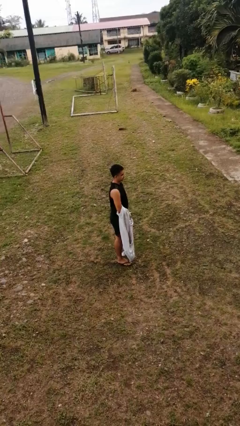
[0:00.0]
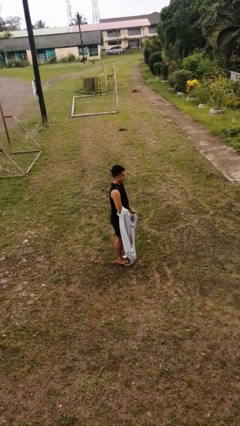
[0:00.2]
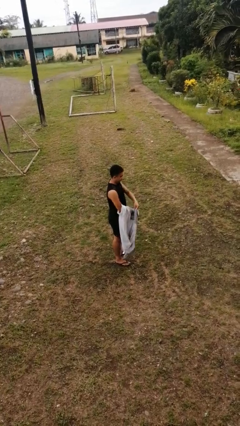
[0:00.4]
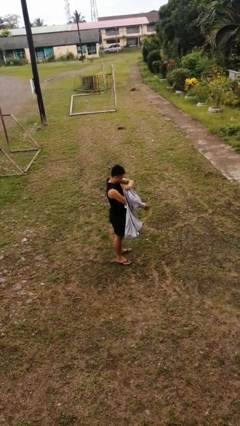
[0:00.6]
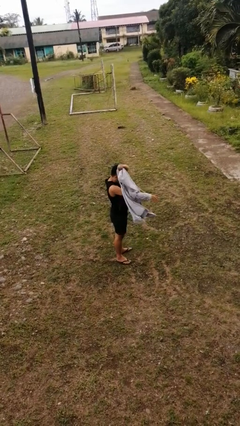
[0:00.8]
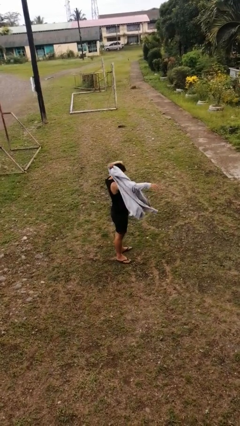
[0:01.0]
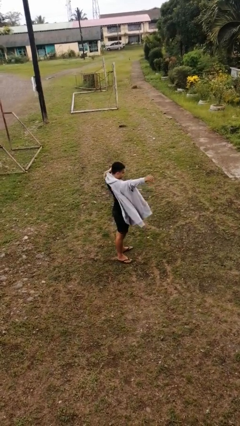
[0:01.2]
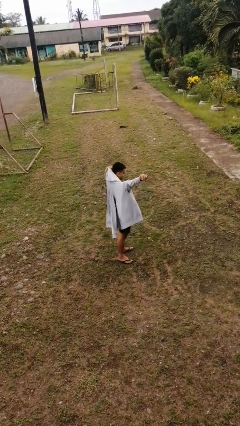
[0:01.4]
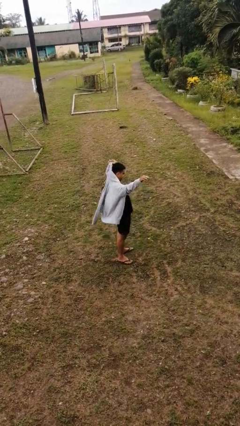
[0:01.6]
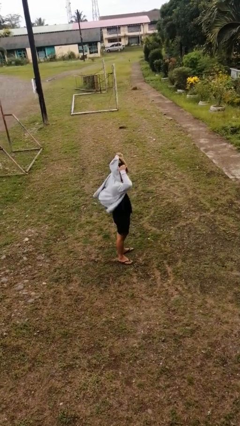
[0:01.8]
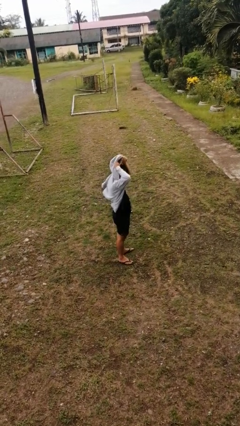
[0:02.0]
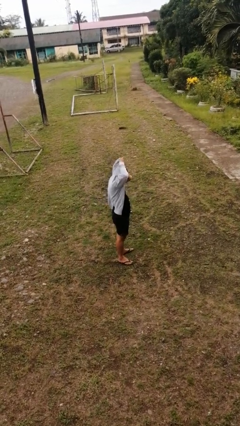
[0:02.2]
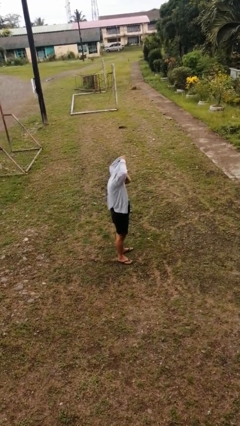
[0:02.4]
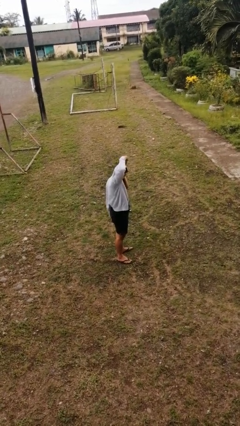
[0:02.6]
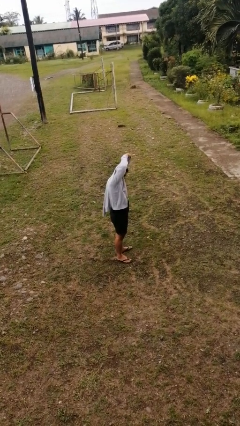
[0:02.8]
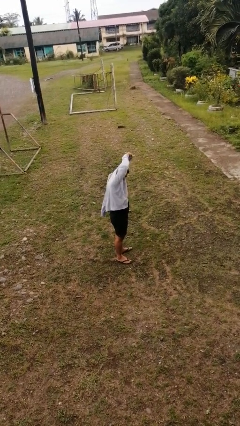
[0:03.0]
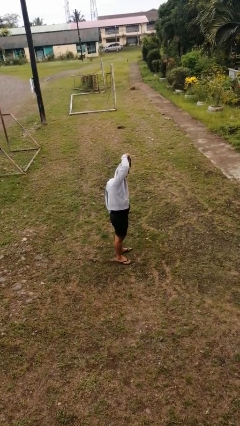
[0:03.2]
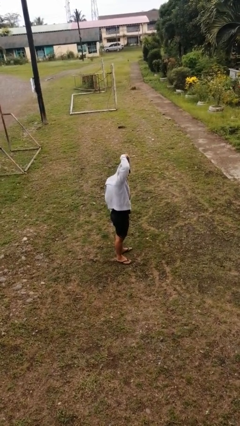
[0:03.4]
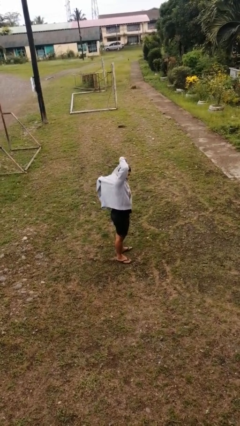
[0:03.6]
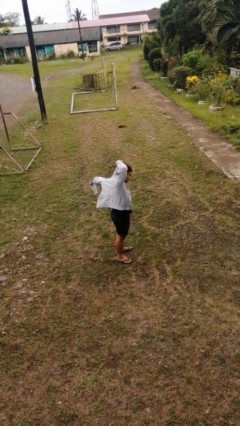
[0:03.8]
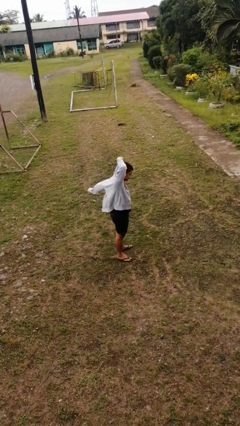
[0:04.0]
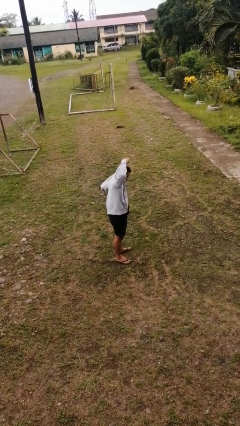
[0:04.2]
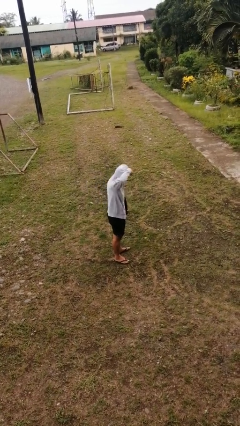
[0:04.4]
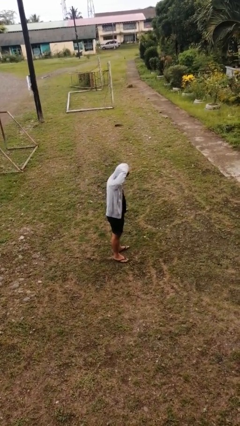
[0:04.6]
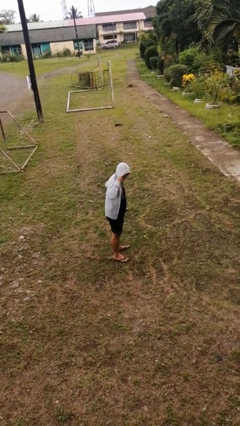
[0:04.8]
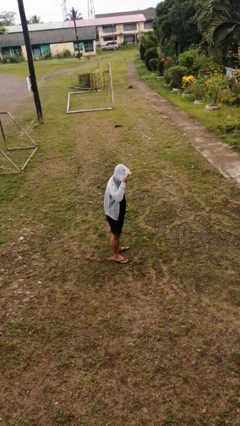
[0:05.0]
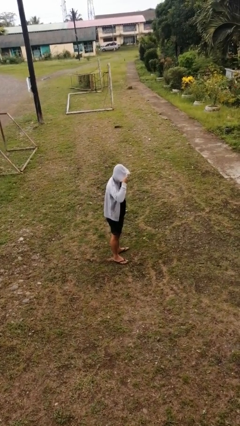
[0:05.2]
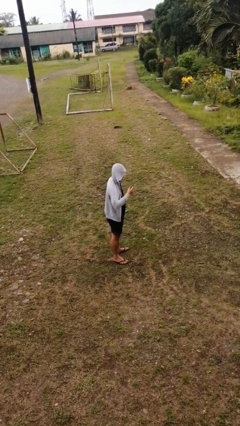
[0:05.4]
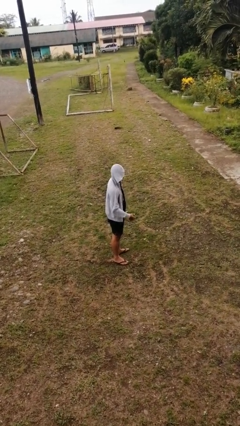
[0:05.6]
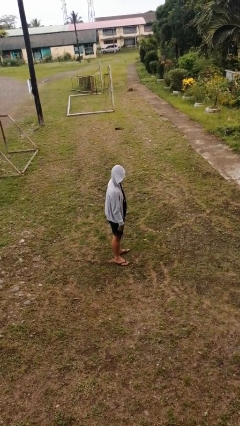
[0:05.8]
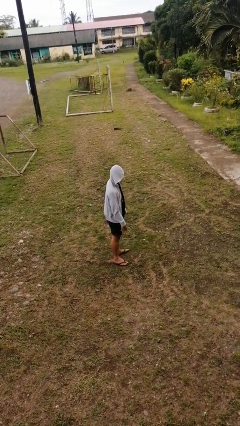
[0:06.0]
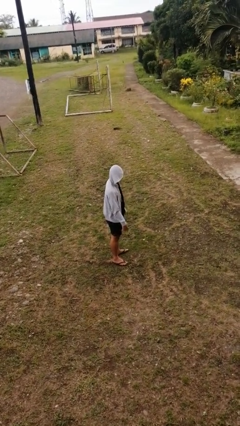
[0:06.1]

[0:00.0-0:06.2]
person puts on hoodie

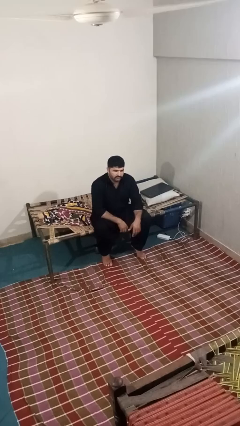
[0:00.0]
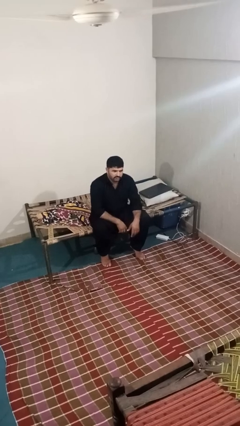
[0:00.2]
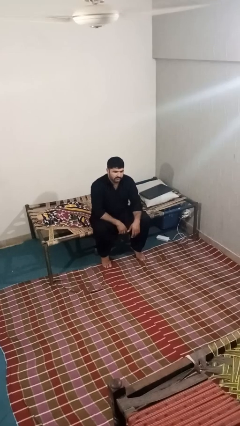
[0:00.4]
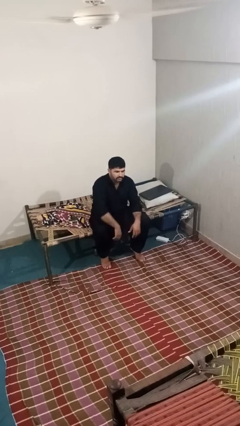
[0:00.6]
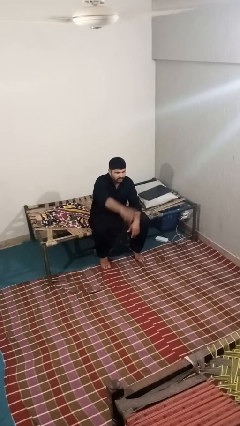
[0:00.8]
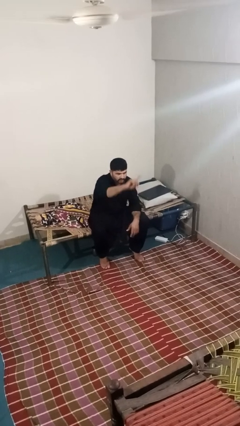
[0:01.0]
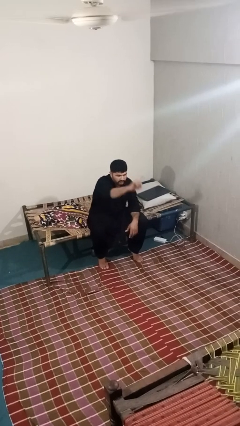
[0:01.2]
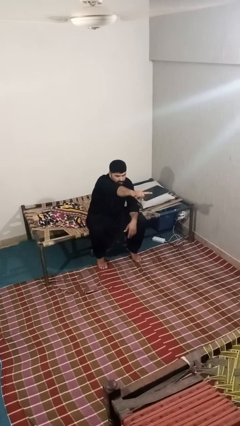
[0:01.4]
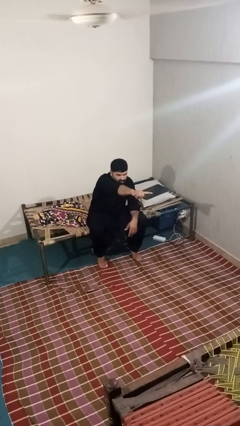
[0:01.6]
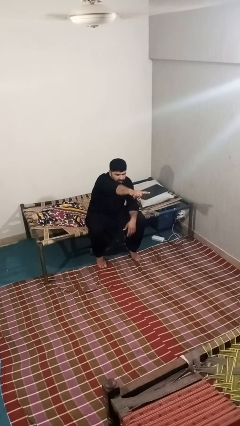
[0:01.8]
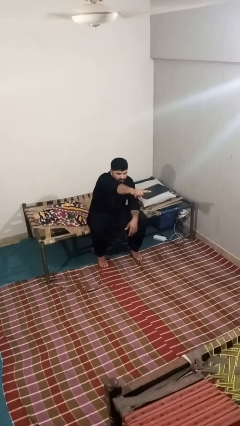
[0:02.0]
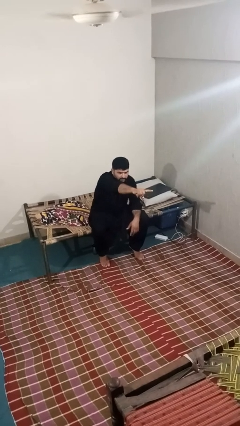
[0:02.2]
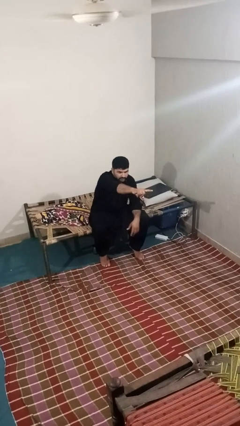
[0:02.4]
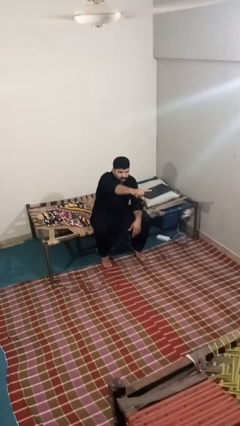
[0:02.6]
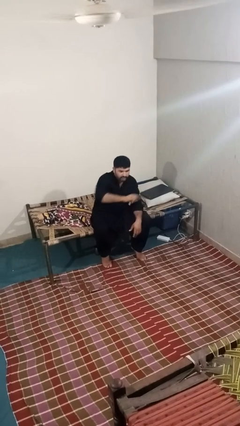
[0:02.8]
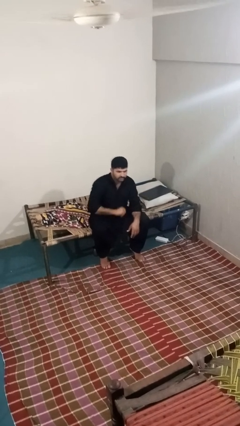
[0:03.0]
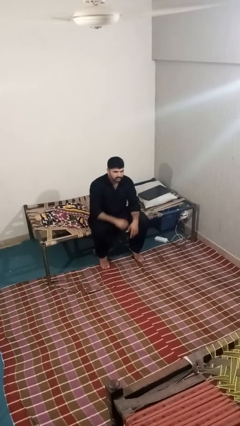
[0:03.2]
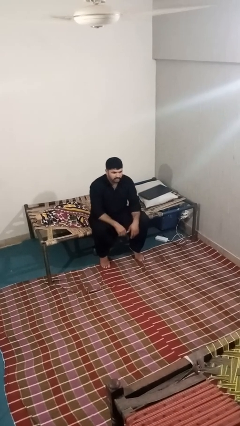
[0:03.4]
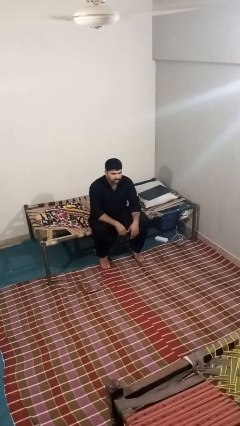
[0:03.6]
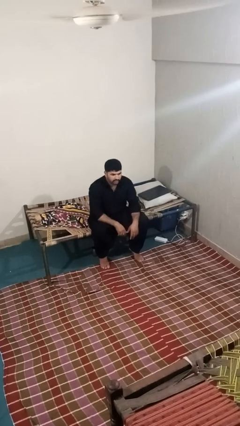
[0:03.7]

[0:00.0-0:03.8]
person points at person

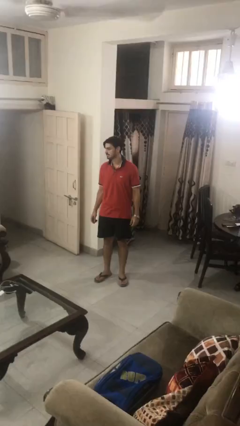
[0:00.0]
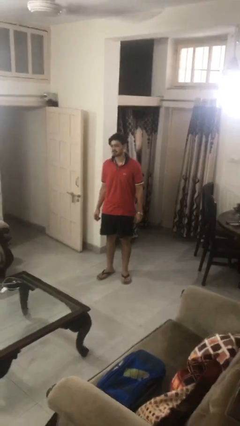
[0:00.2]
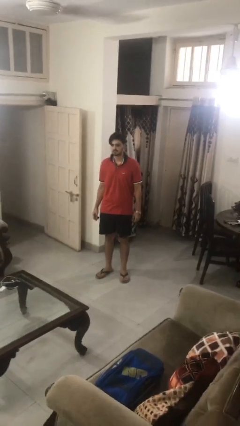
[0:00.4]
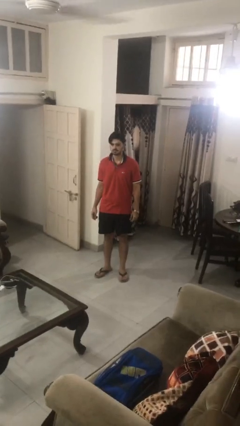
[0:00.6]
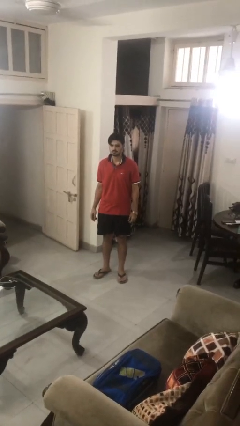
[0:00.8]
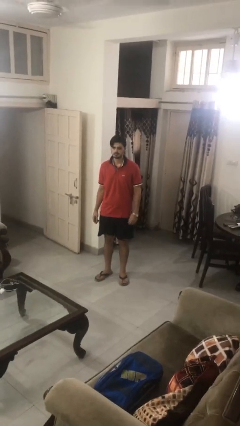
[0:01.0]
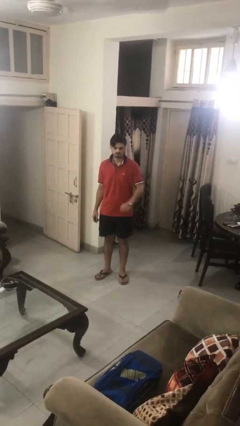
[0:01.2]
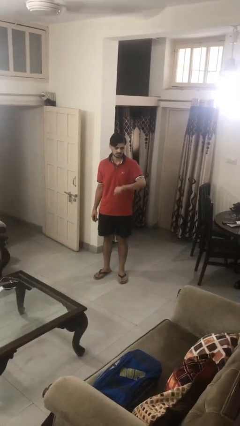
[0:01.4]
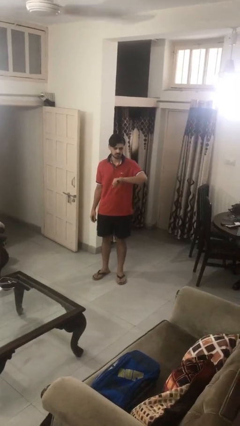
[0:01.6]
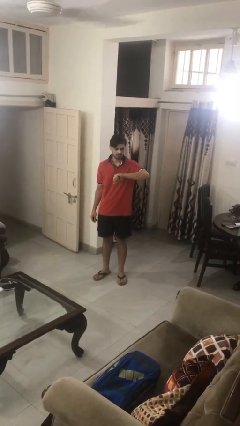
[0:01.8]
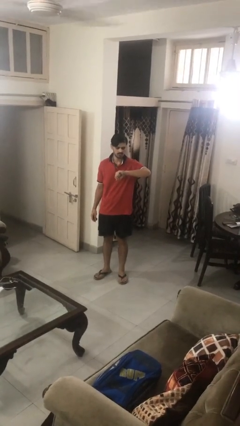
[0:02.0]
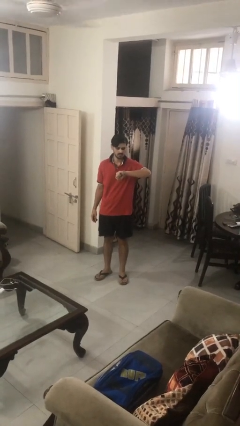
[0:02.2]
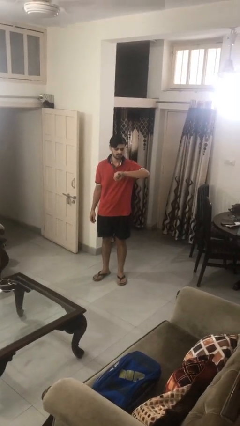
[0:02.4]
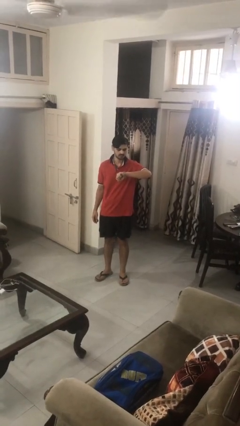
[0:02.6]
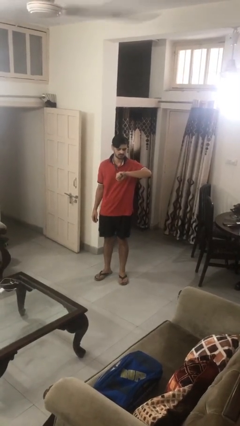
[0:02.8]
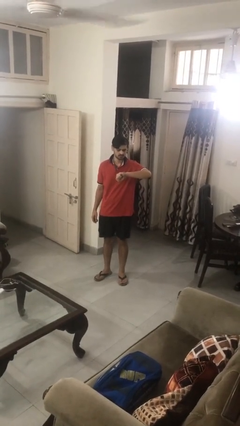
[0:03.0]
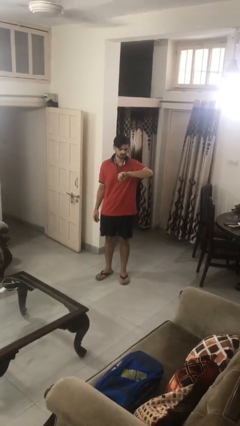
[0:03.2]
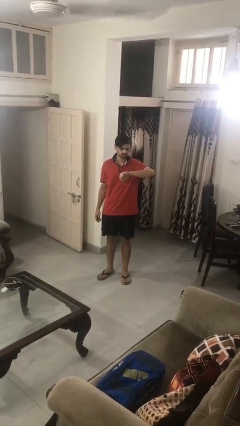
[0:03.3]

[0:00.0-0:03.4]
person looks at wristwatch

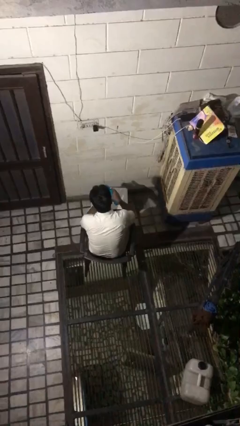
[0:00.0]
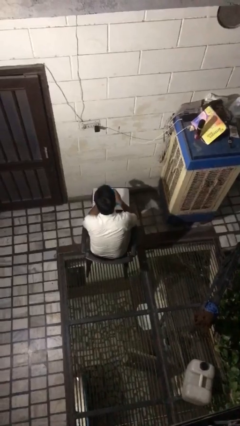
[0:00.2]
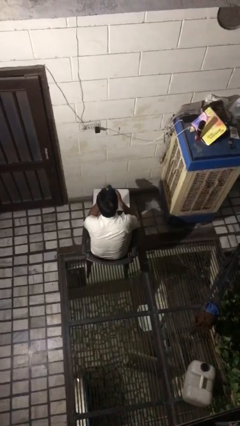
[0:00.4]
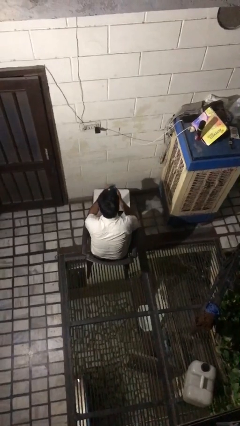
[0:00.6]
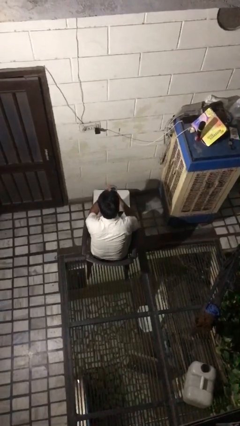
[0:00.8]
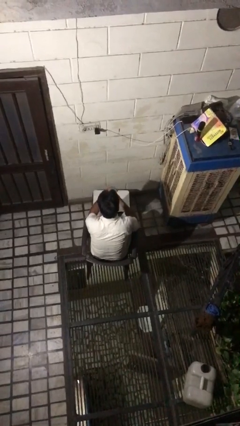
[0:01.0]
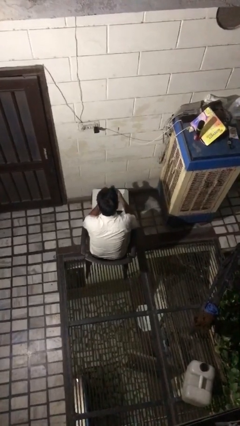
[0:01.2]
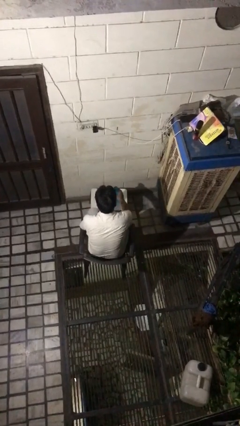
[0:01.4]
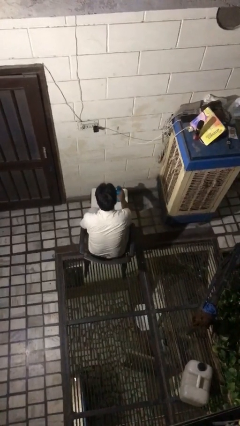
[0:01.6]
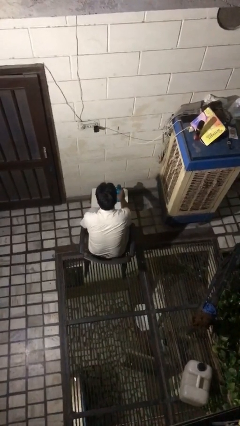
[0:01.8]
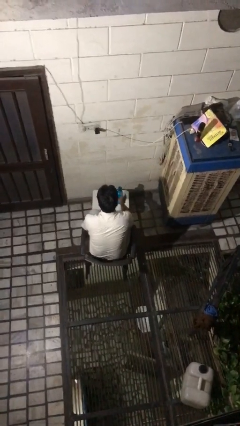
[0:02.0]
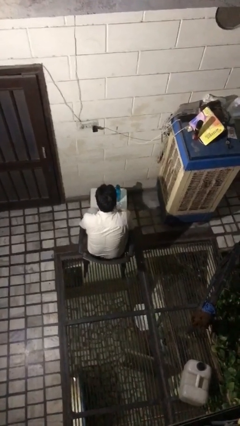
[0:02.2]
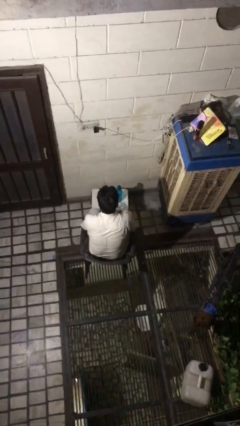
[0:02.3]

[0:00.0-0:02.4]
person screws lid to bottle

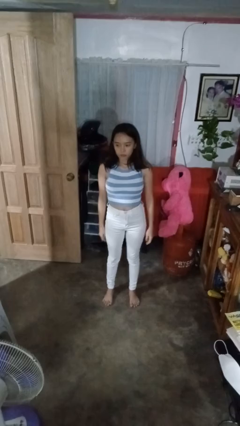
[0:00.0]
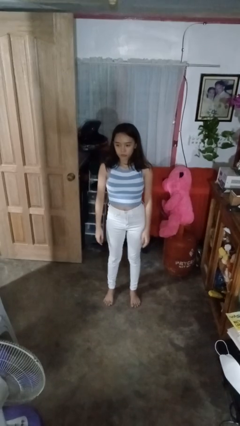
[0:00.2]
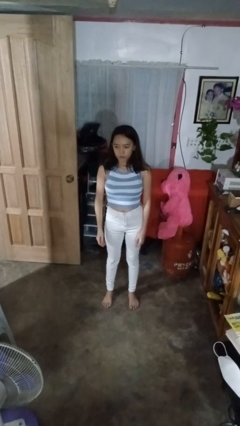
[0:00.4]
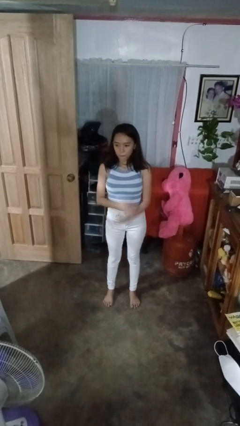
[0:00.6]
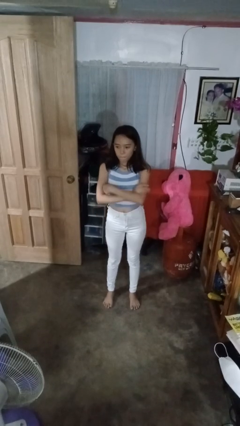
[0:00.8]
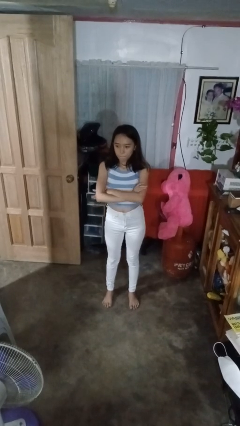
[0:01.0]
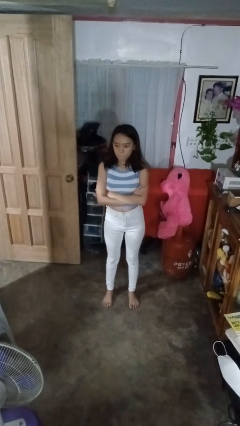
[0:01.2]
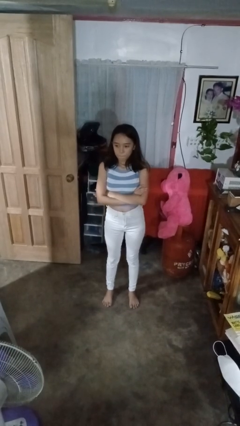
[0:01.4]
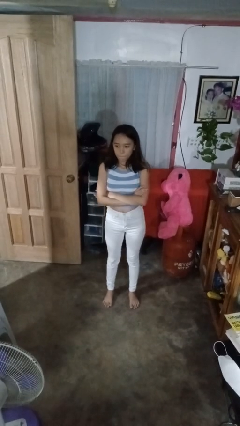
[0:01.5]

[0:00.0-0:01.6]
person crosses arms

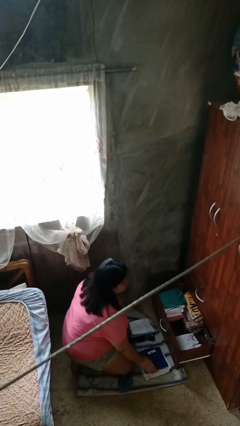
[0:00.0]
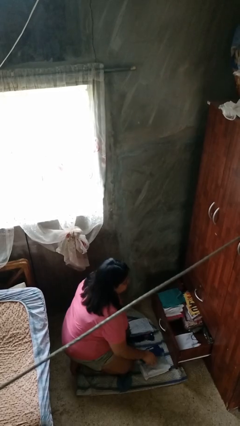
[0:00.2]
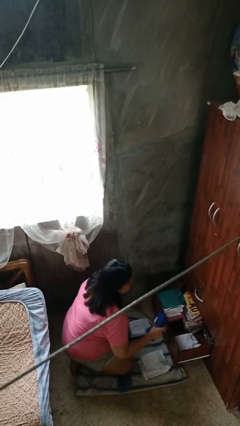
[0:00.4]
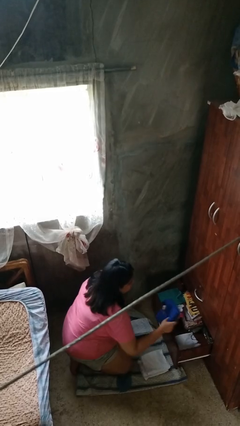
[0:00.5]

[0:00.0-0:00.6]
person puts clothes into dresser
